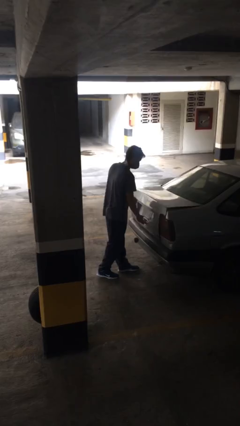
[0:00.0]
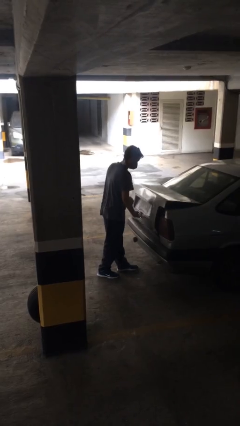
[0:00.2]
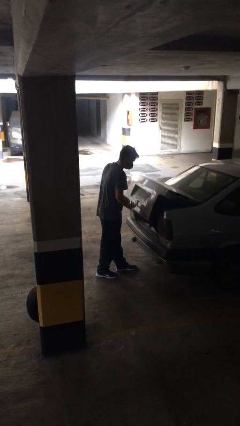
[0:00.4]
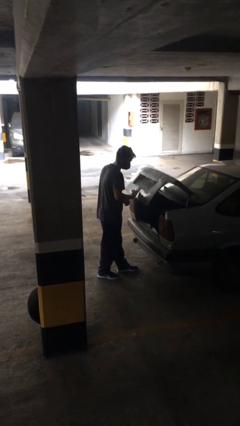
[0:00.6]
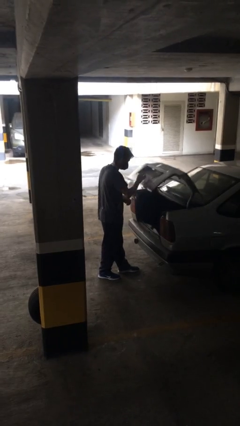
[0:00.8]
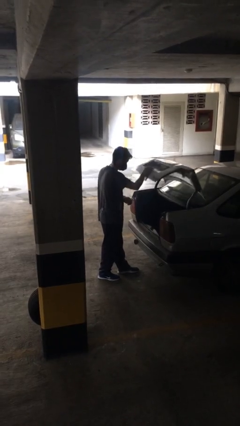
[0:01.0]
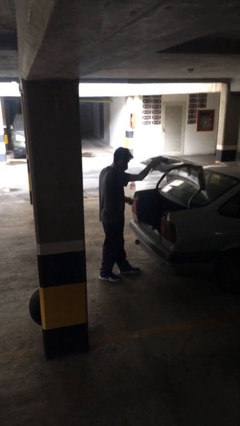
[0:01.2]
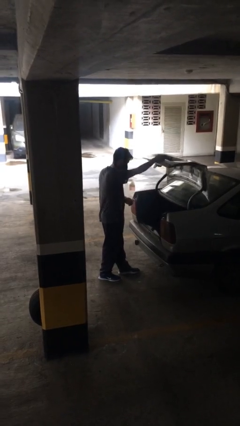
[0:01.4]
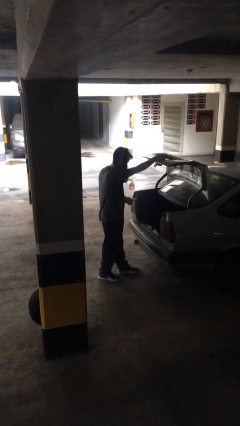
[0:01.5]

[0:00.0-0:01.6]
person opens car trunk

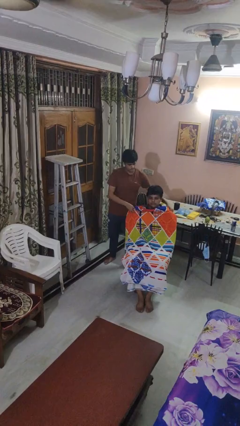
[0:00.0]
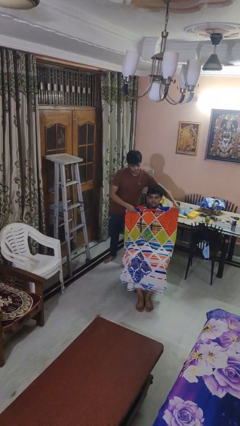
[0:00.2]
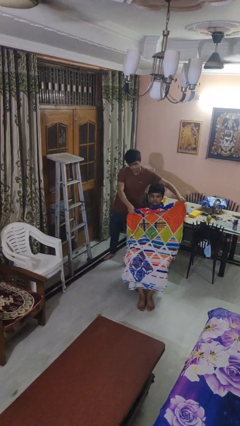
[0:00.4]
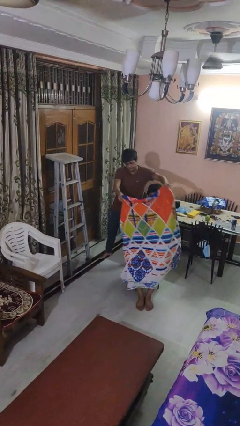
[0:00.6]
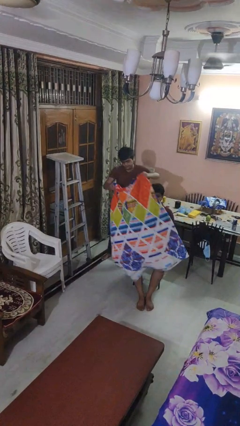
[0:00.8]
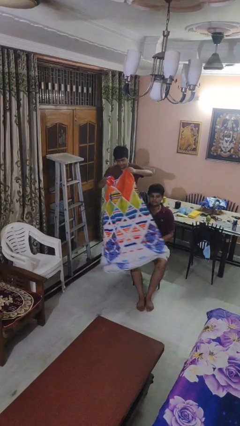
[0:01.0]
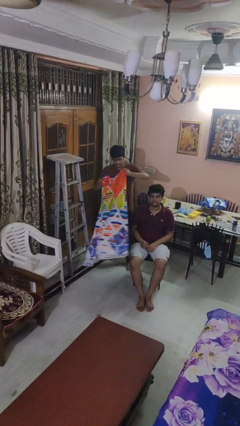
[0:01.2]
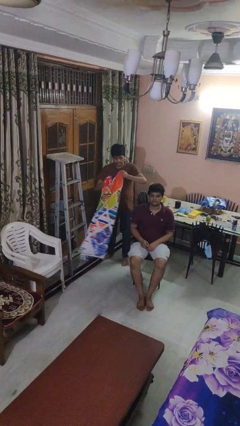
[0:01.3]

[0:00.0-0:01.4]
person uncovers friend with blanket

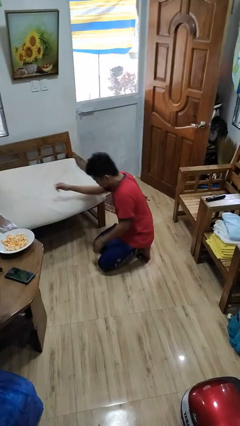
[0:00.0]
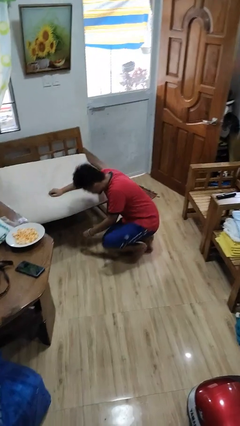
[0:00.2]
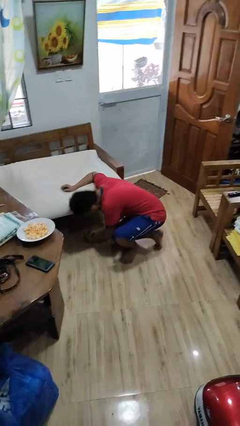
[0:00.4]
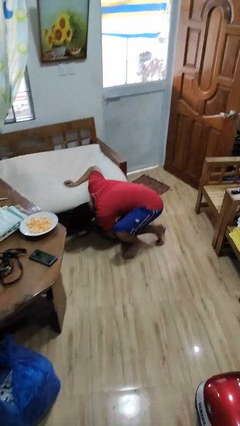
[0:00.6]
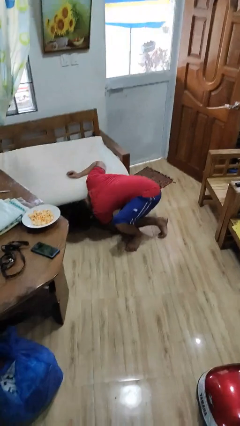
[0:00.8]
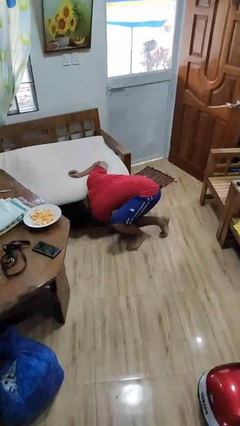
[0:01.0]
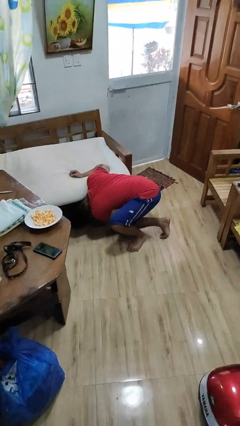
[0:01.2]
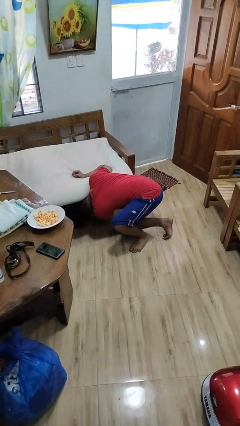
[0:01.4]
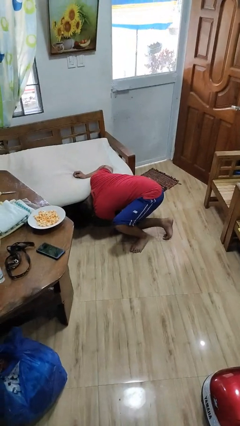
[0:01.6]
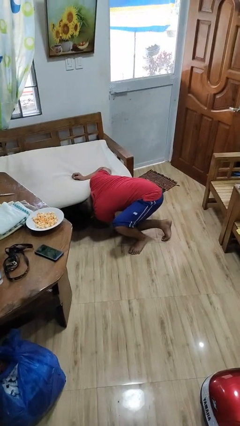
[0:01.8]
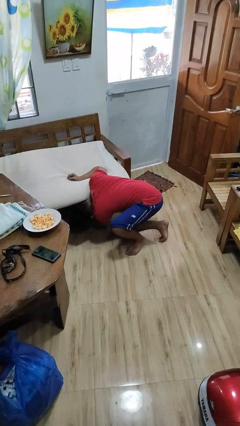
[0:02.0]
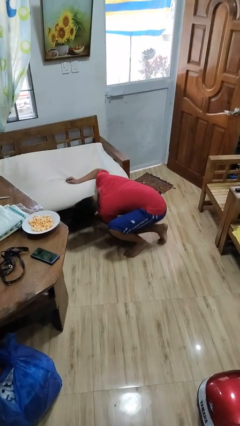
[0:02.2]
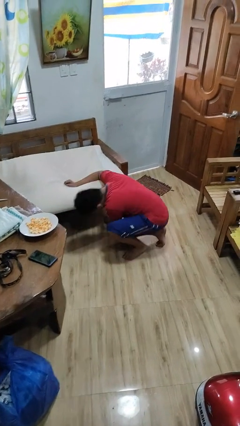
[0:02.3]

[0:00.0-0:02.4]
person searches under couch

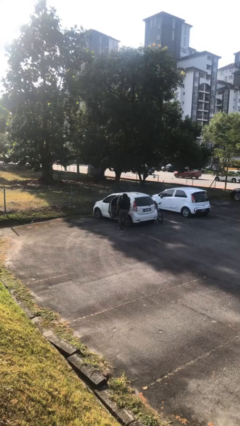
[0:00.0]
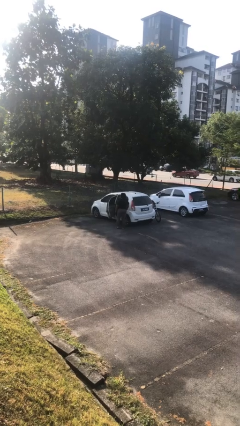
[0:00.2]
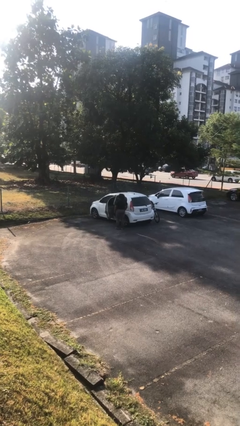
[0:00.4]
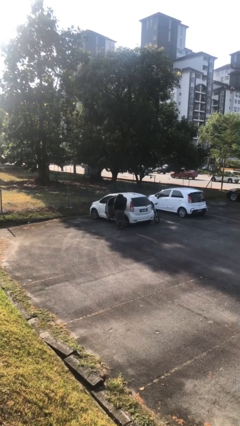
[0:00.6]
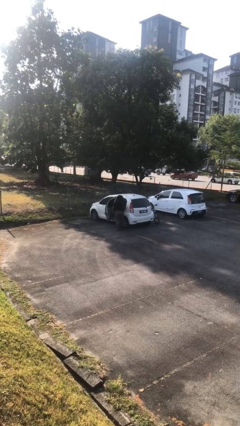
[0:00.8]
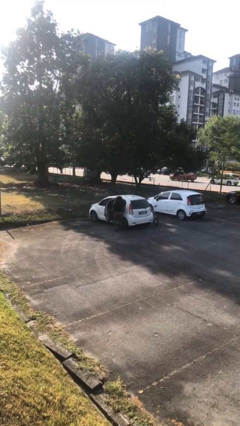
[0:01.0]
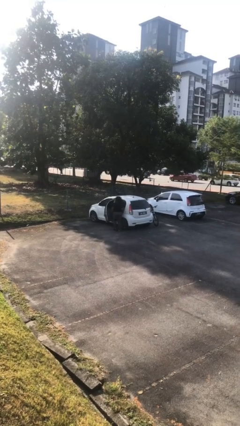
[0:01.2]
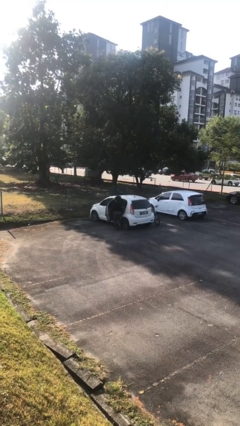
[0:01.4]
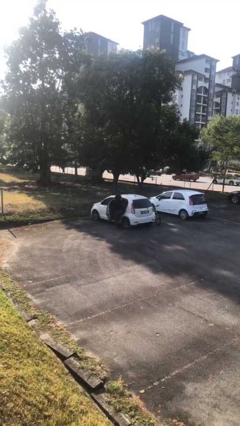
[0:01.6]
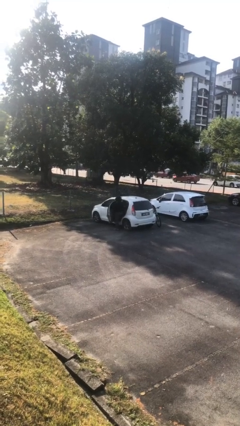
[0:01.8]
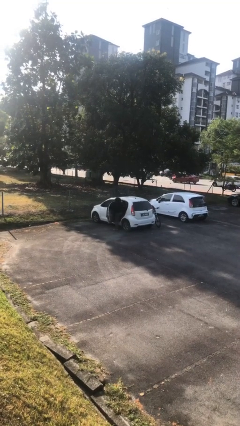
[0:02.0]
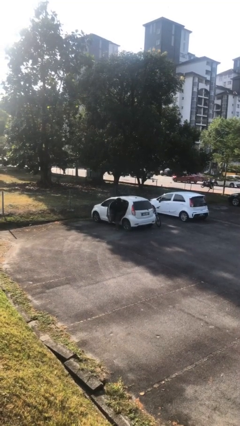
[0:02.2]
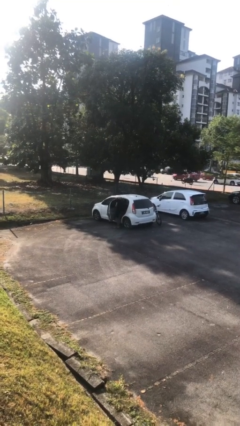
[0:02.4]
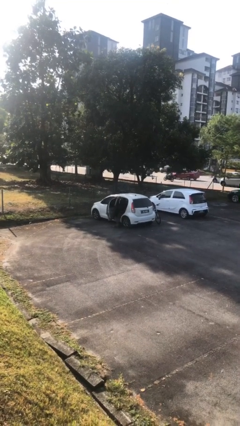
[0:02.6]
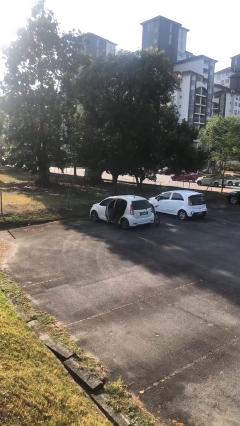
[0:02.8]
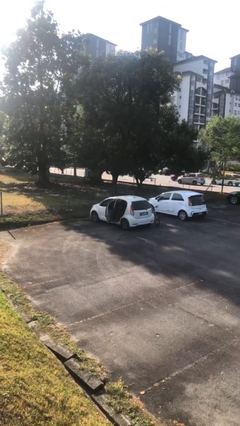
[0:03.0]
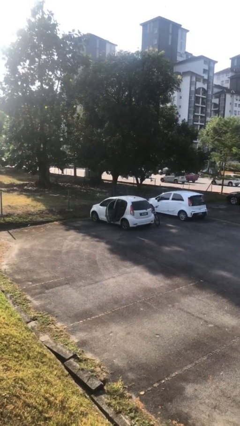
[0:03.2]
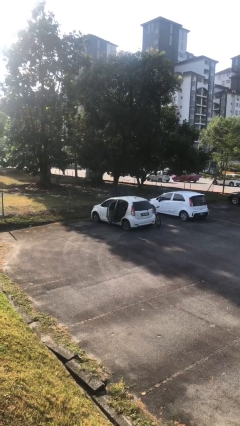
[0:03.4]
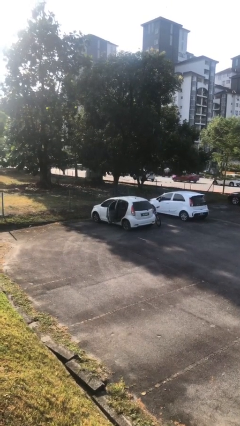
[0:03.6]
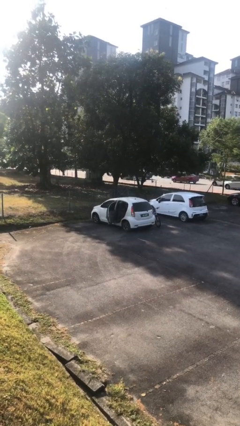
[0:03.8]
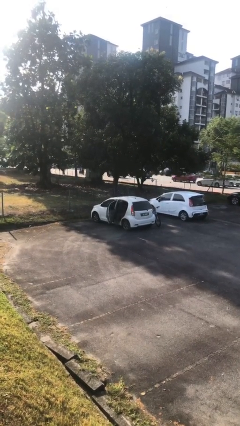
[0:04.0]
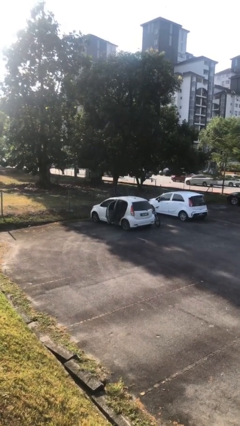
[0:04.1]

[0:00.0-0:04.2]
person enters car

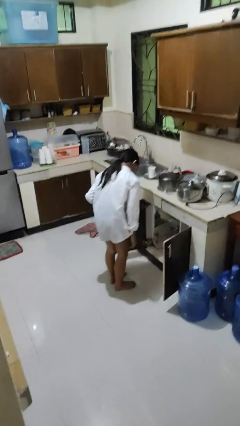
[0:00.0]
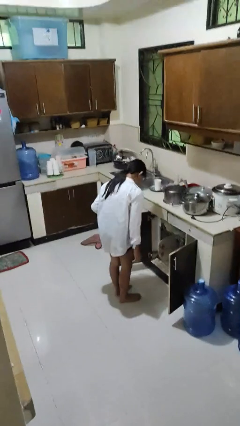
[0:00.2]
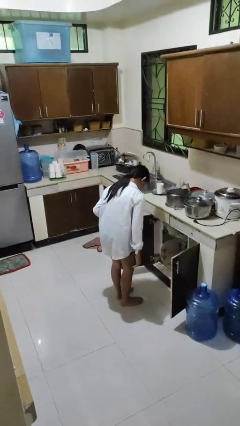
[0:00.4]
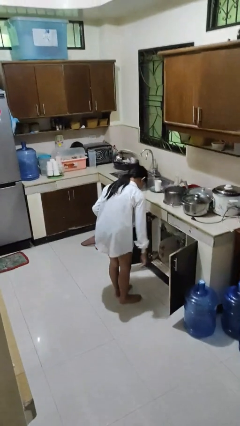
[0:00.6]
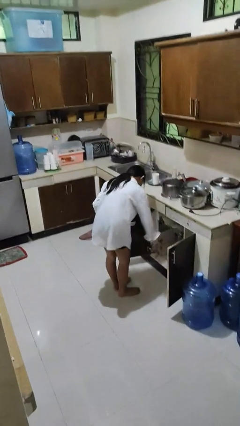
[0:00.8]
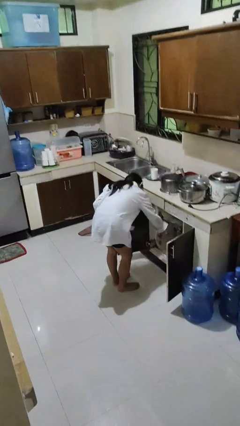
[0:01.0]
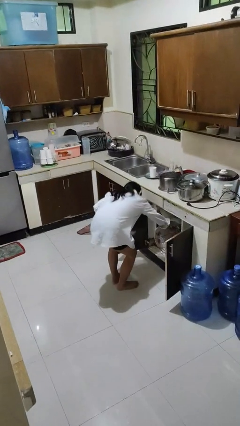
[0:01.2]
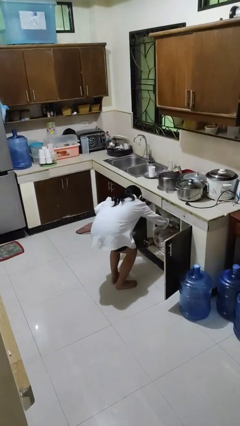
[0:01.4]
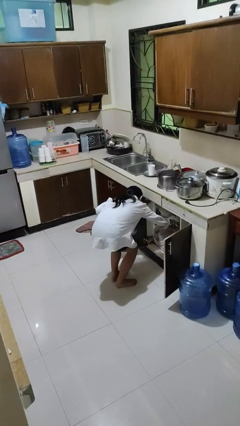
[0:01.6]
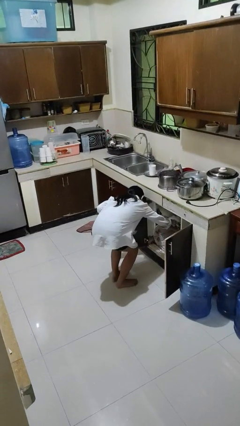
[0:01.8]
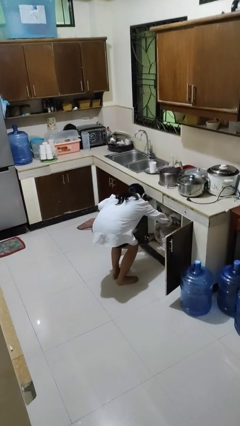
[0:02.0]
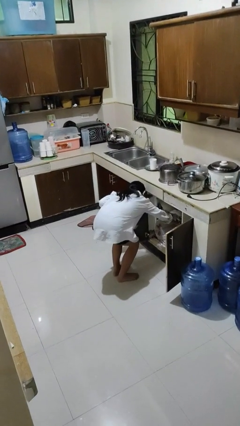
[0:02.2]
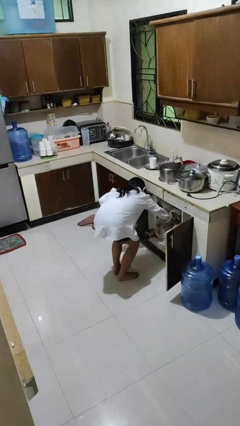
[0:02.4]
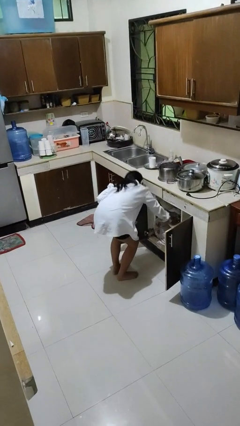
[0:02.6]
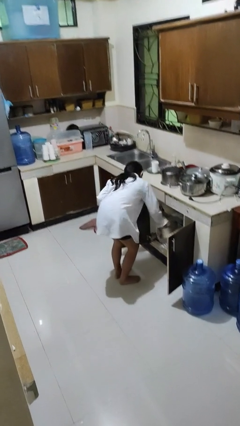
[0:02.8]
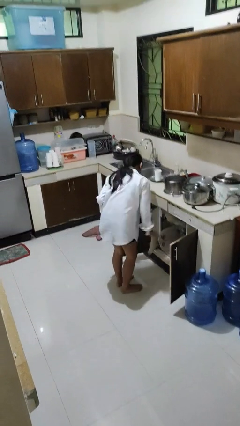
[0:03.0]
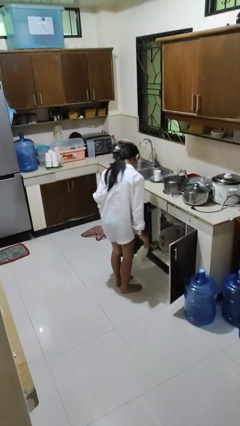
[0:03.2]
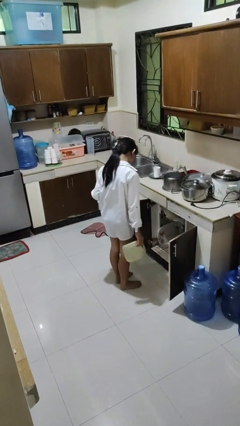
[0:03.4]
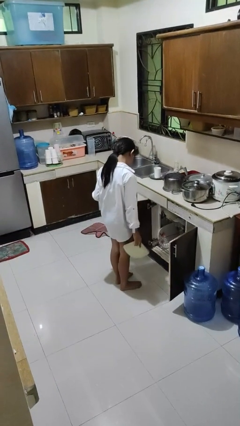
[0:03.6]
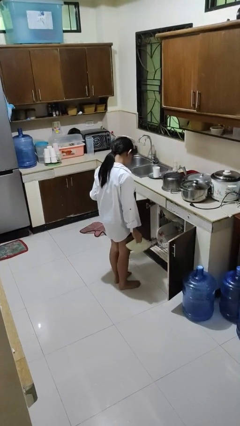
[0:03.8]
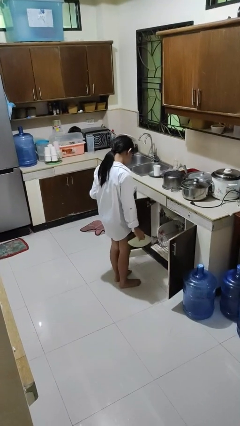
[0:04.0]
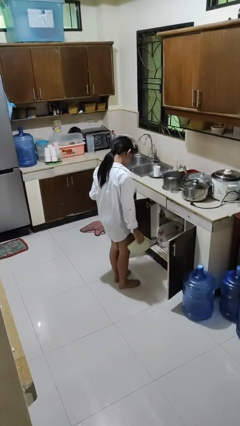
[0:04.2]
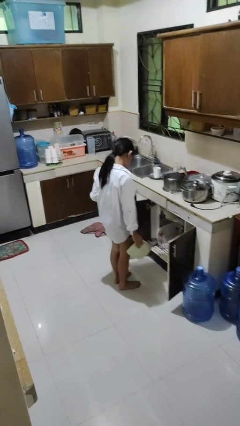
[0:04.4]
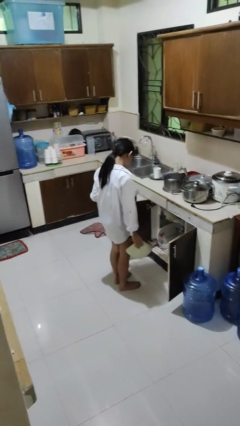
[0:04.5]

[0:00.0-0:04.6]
person unloads dishwasher

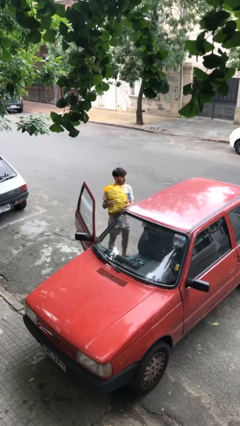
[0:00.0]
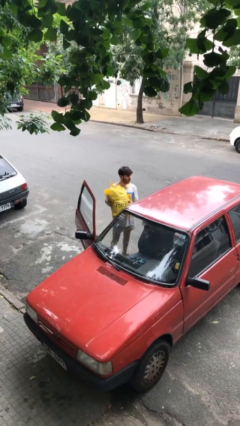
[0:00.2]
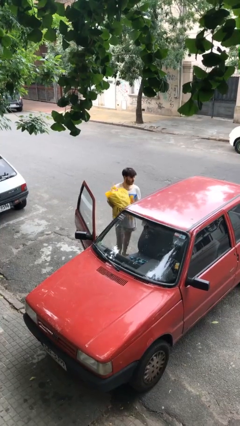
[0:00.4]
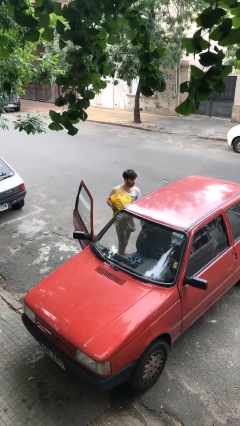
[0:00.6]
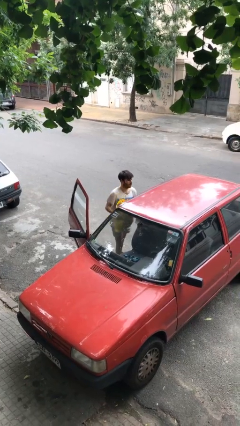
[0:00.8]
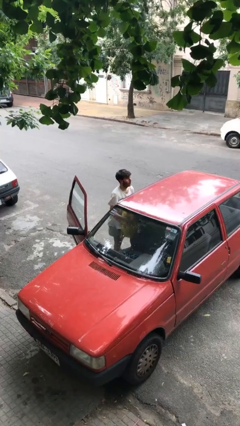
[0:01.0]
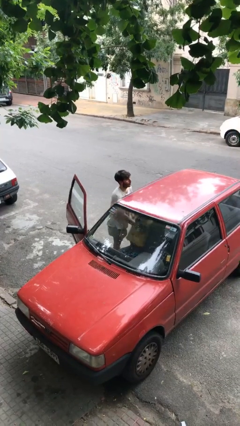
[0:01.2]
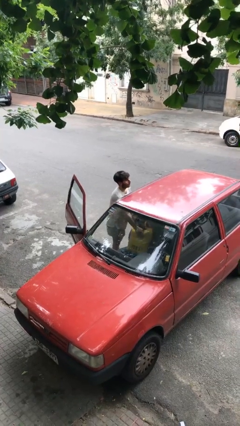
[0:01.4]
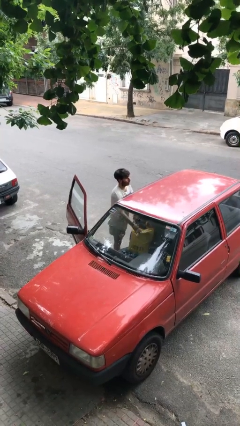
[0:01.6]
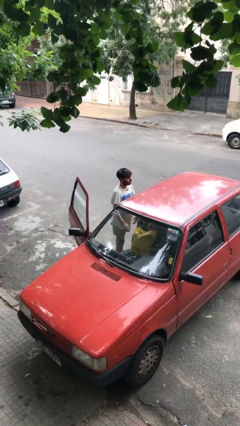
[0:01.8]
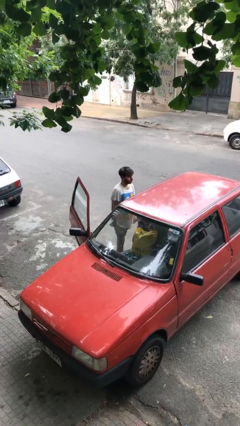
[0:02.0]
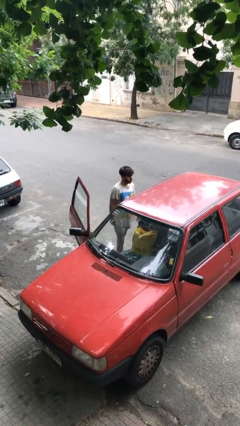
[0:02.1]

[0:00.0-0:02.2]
person loads car

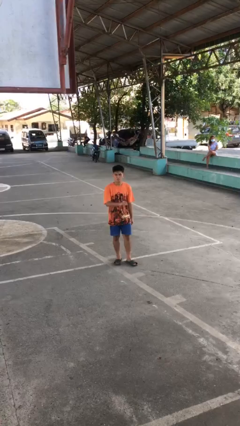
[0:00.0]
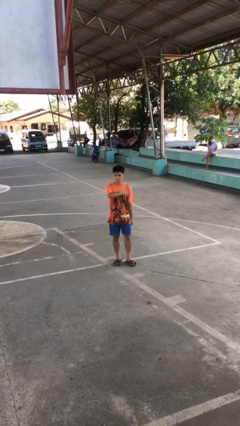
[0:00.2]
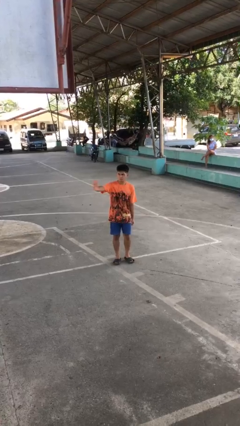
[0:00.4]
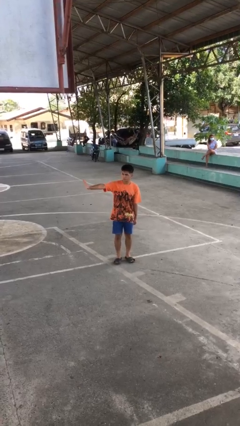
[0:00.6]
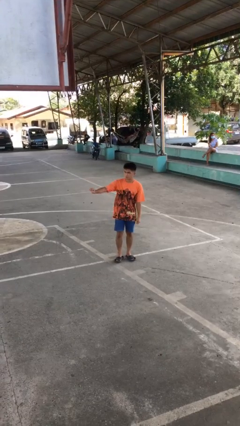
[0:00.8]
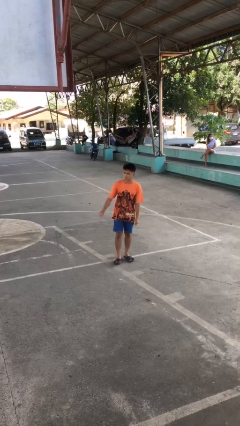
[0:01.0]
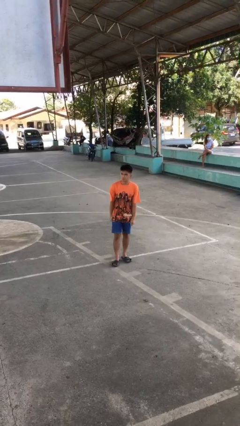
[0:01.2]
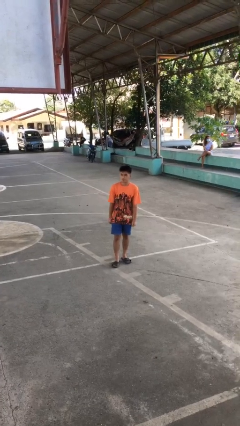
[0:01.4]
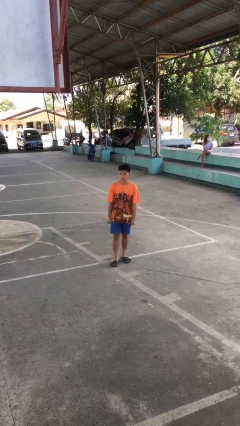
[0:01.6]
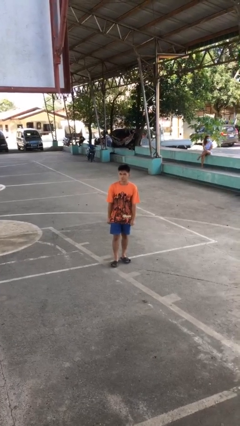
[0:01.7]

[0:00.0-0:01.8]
person gestures swipe right
